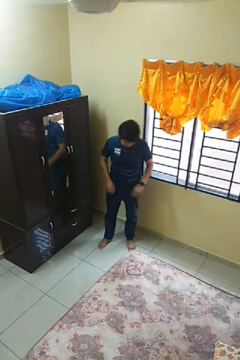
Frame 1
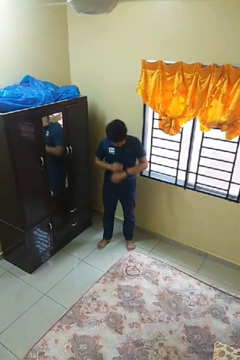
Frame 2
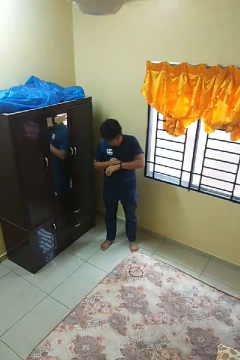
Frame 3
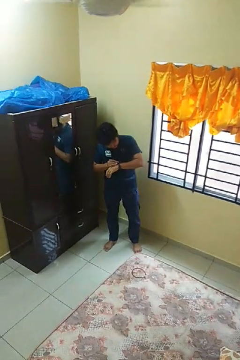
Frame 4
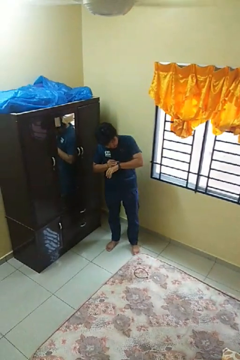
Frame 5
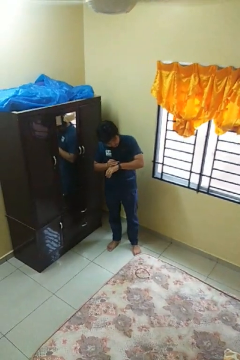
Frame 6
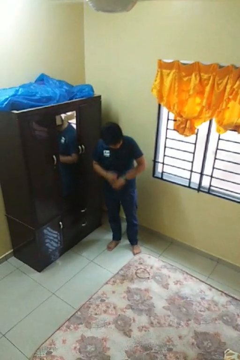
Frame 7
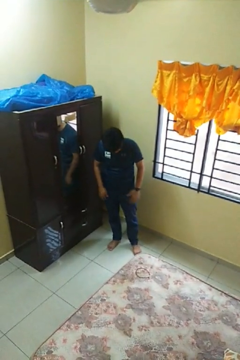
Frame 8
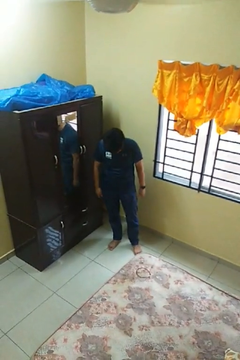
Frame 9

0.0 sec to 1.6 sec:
person looks at wristwatch

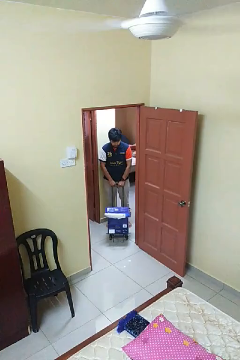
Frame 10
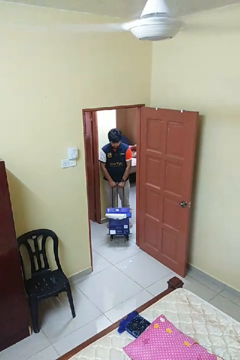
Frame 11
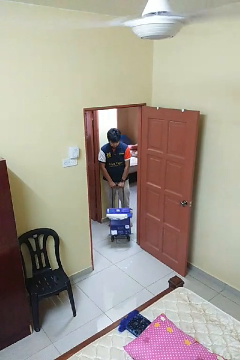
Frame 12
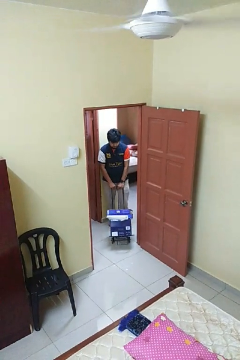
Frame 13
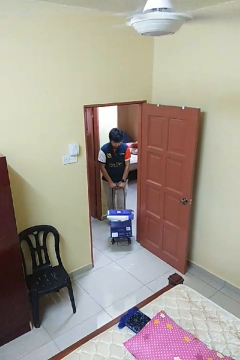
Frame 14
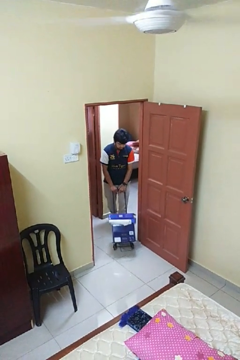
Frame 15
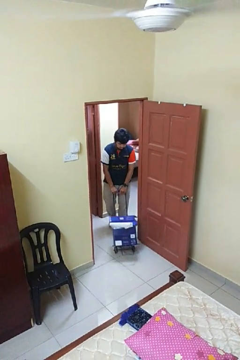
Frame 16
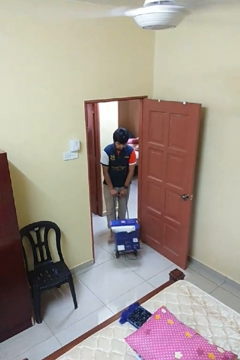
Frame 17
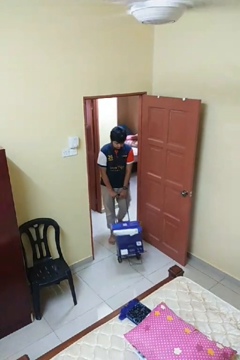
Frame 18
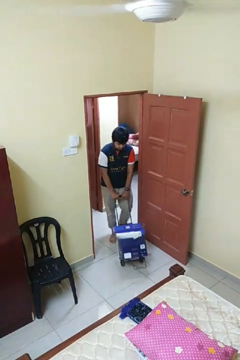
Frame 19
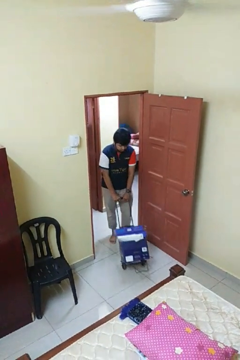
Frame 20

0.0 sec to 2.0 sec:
person pushes wheeled cart

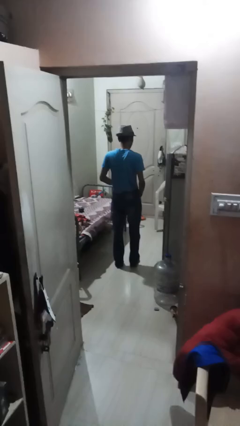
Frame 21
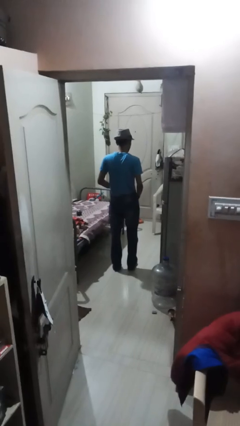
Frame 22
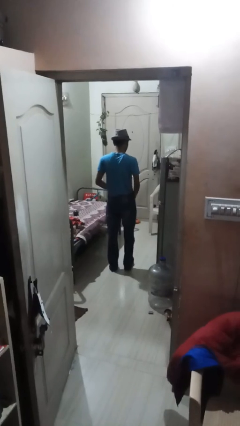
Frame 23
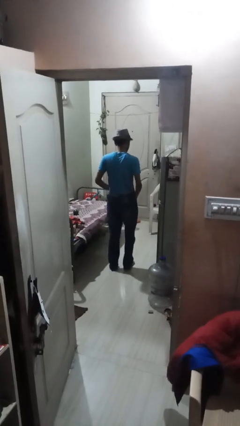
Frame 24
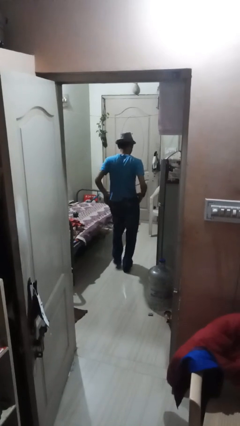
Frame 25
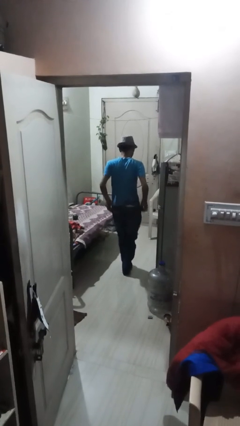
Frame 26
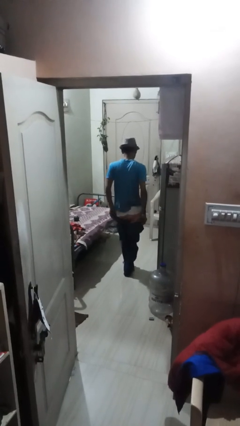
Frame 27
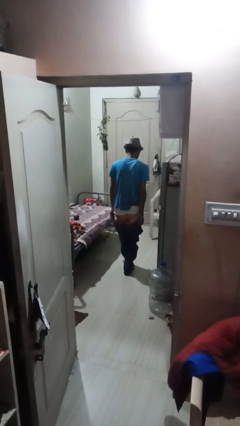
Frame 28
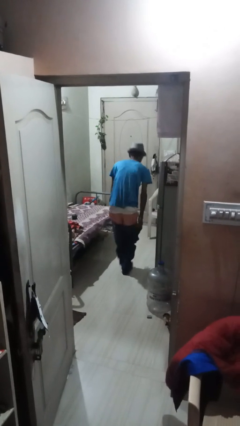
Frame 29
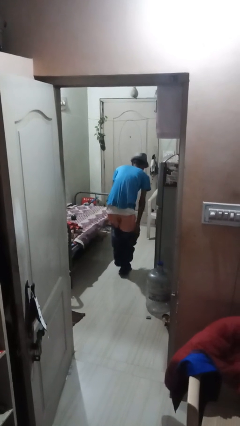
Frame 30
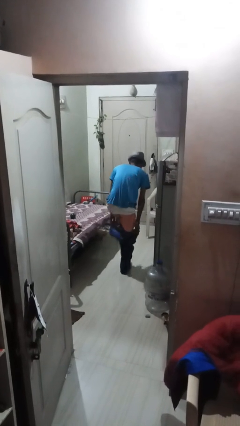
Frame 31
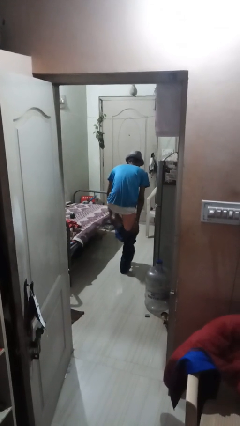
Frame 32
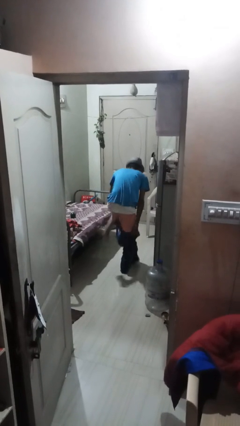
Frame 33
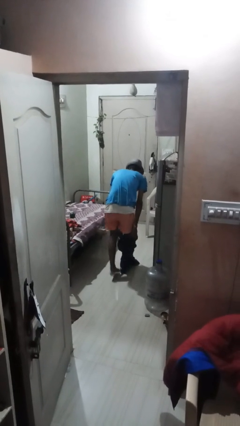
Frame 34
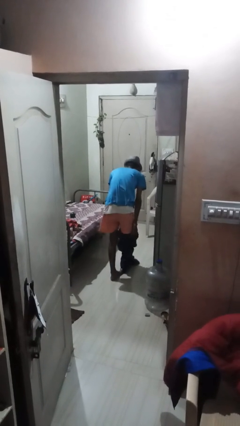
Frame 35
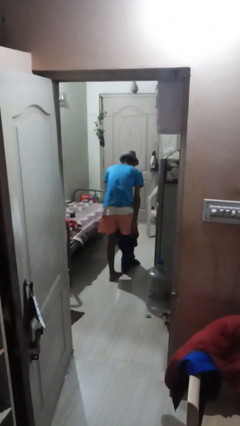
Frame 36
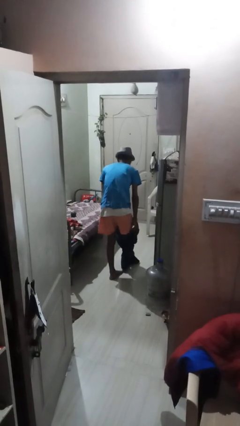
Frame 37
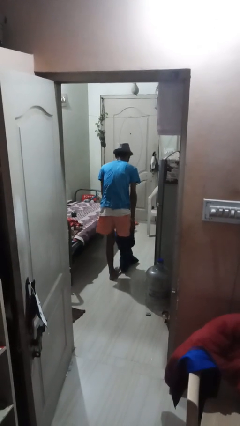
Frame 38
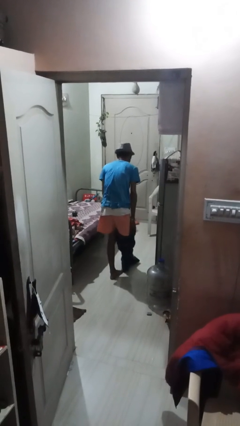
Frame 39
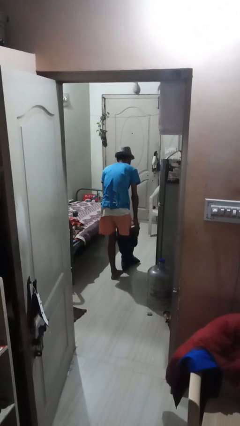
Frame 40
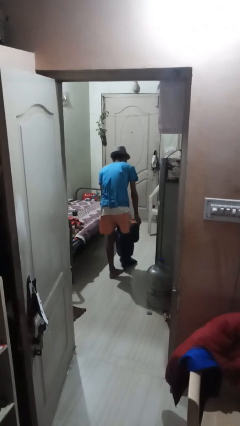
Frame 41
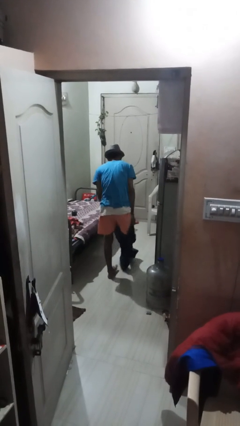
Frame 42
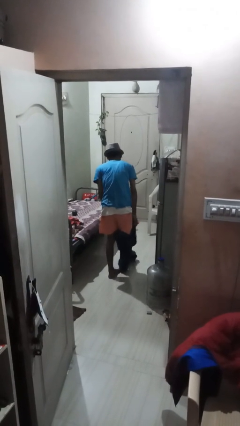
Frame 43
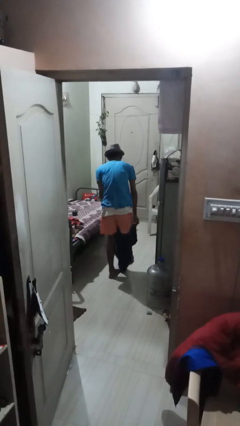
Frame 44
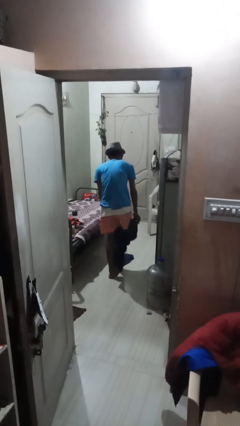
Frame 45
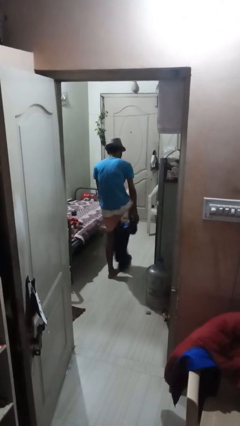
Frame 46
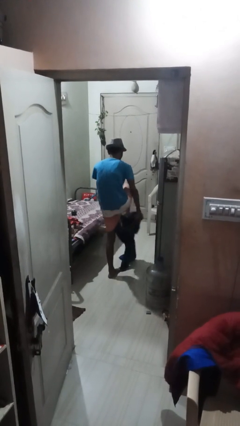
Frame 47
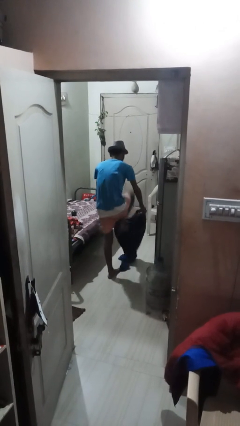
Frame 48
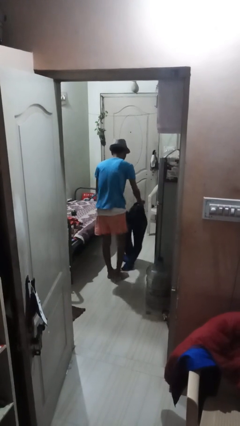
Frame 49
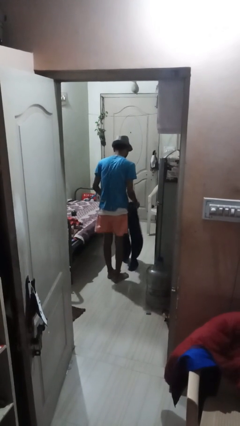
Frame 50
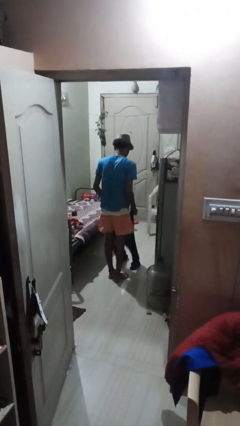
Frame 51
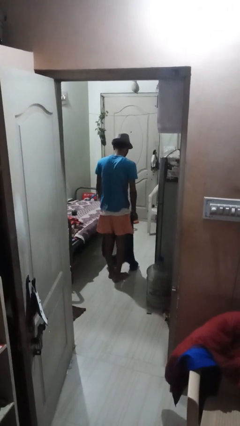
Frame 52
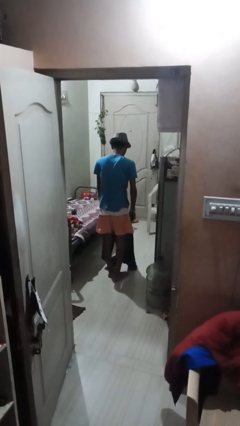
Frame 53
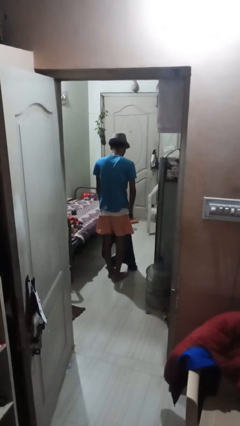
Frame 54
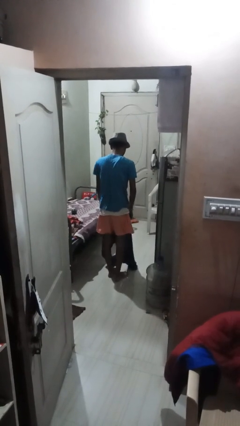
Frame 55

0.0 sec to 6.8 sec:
person takes off pants

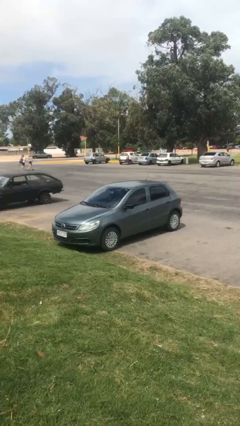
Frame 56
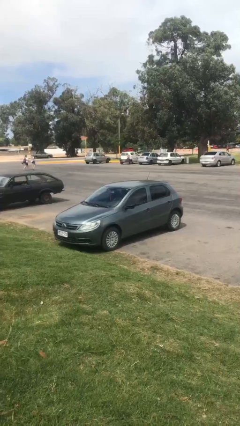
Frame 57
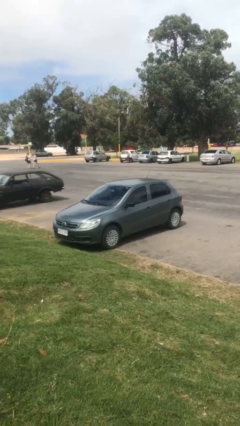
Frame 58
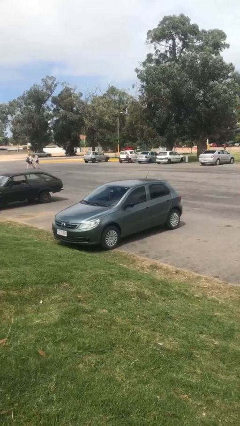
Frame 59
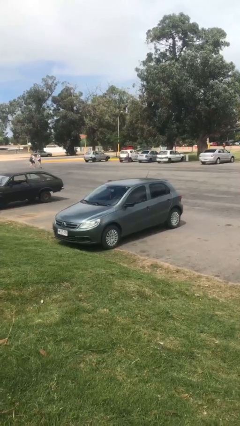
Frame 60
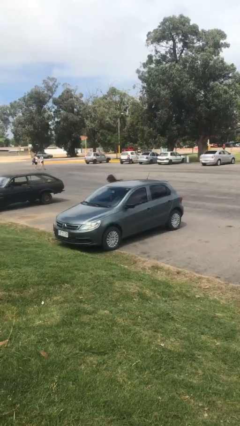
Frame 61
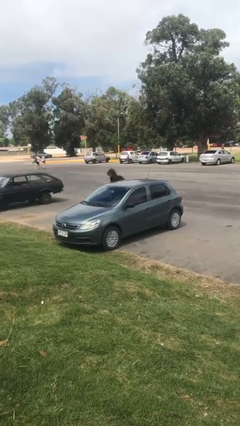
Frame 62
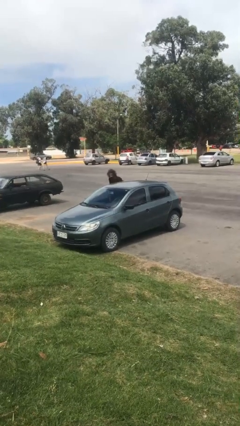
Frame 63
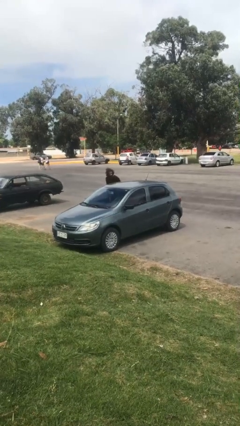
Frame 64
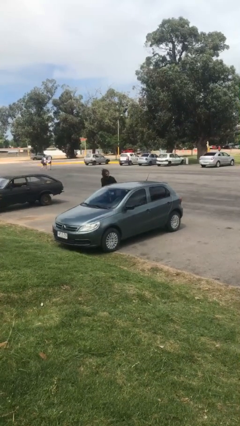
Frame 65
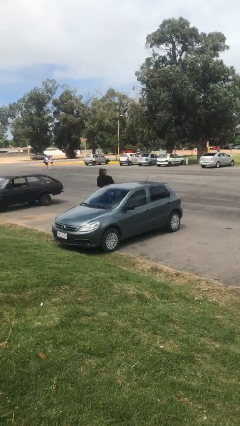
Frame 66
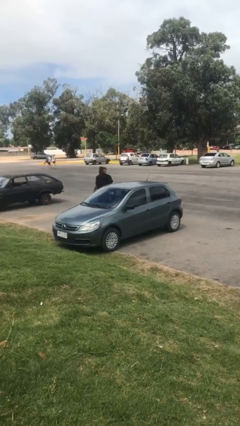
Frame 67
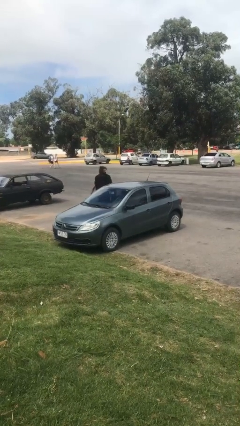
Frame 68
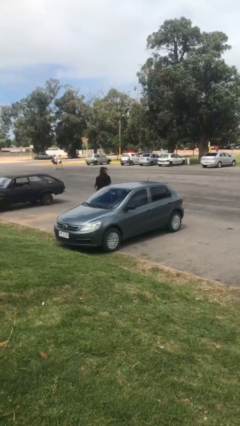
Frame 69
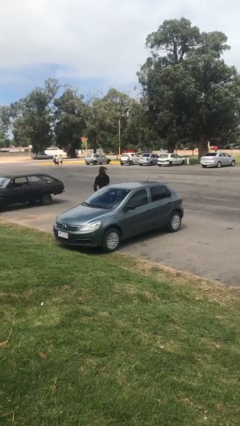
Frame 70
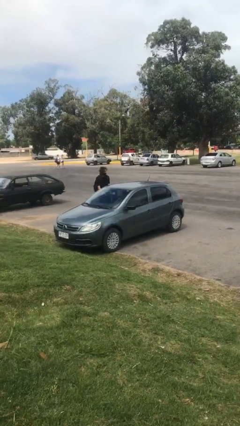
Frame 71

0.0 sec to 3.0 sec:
car drops off person

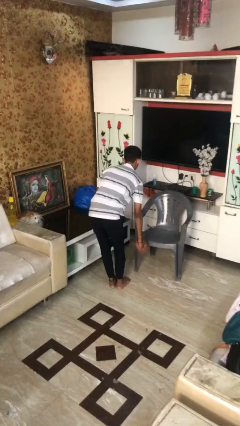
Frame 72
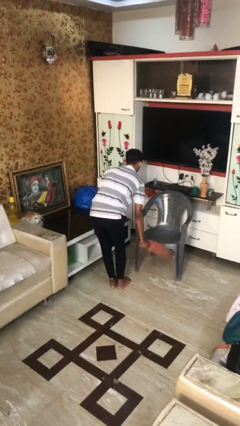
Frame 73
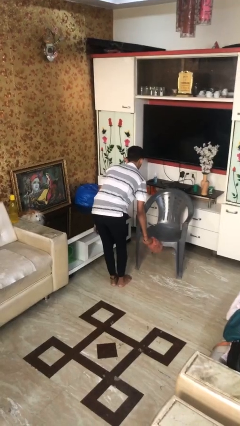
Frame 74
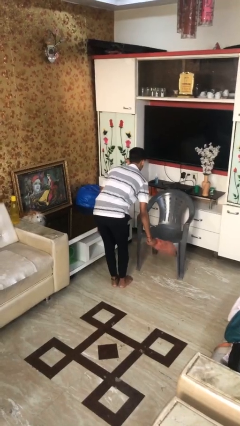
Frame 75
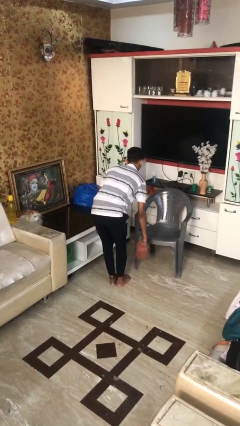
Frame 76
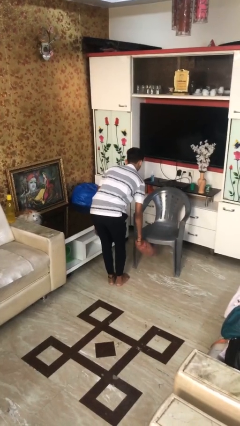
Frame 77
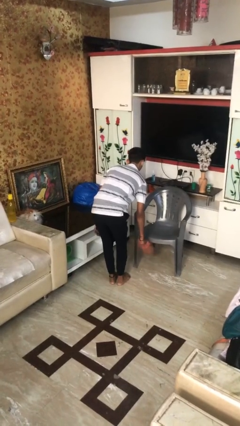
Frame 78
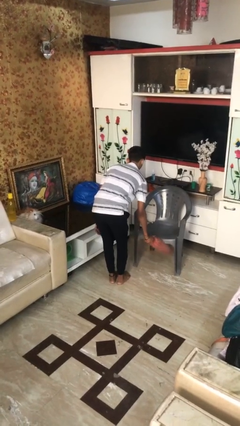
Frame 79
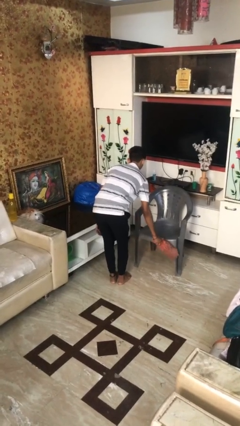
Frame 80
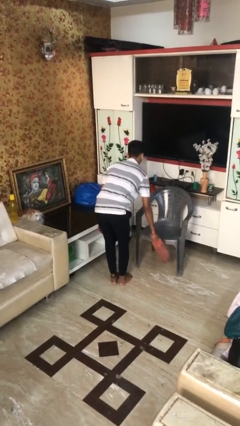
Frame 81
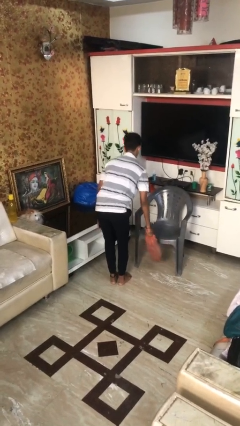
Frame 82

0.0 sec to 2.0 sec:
person dusts furniture

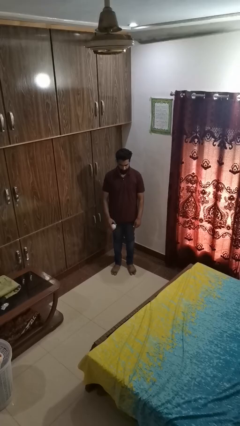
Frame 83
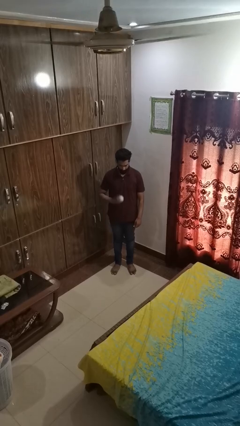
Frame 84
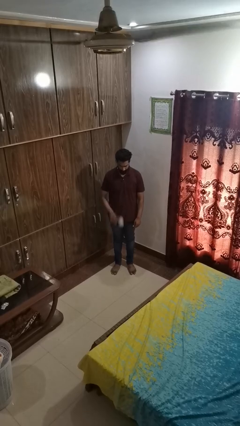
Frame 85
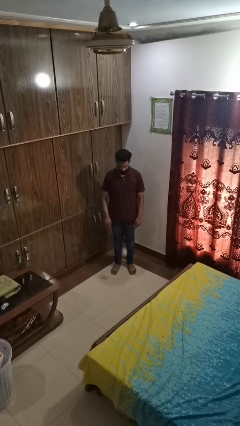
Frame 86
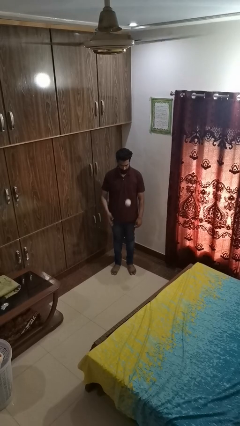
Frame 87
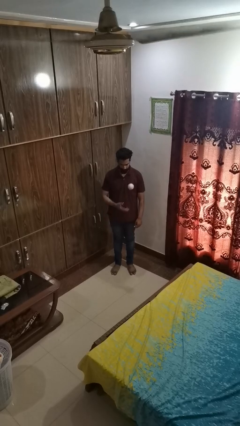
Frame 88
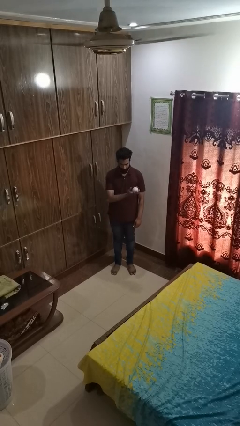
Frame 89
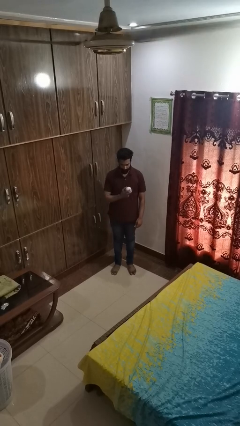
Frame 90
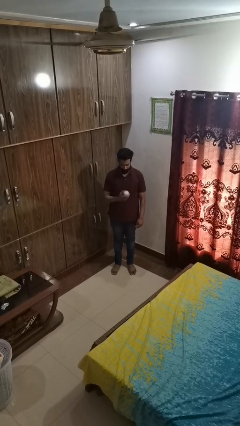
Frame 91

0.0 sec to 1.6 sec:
person bounces ball on floor

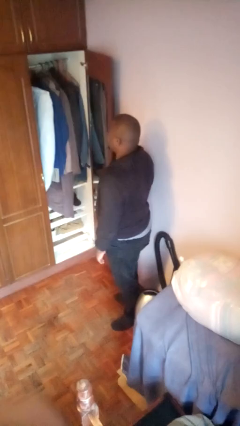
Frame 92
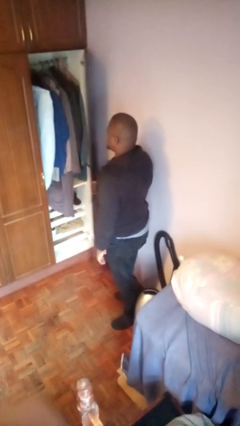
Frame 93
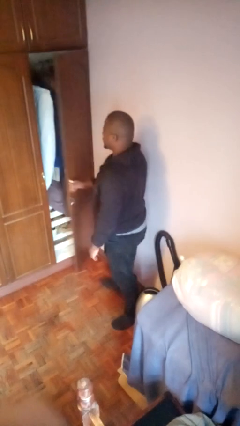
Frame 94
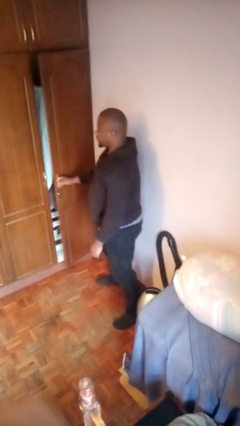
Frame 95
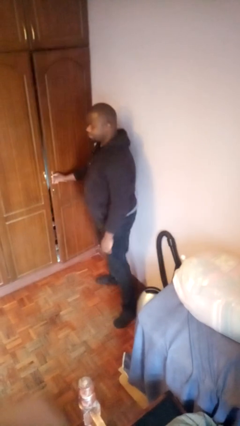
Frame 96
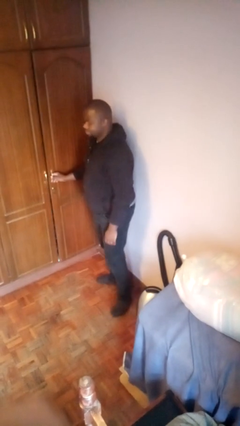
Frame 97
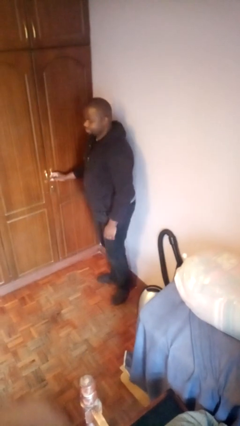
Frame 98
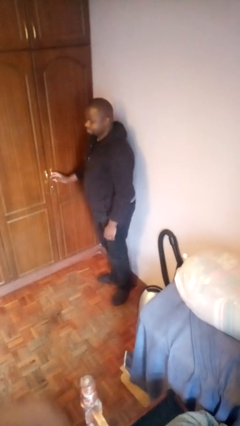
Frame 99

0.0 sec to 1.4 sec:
person closes closet door
